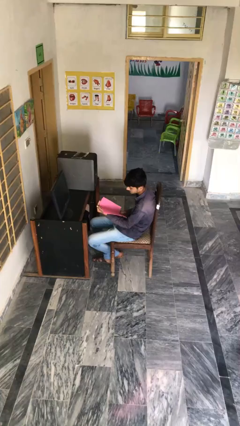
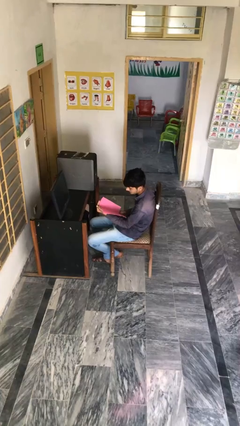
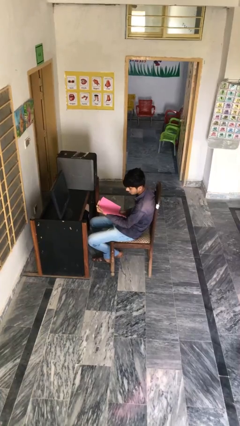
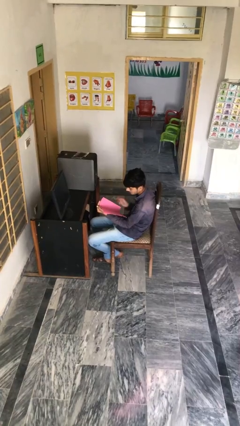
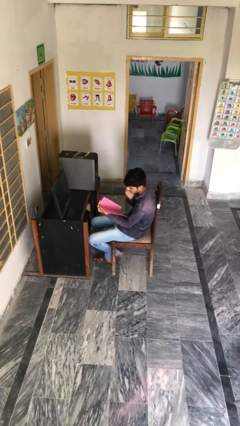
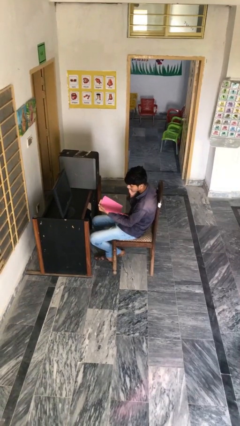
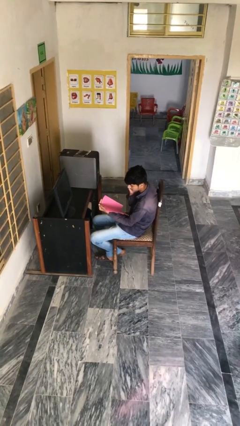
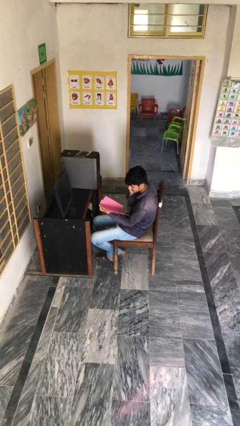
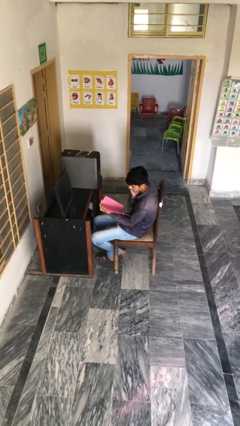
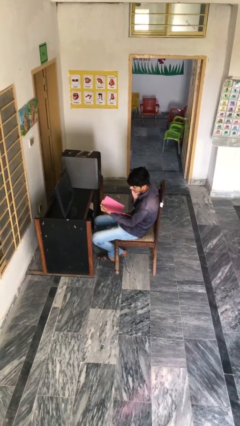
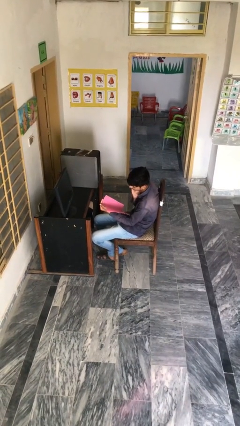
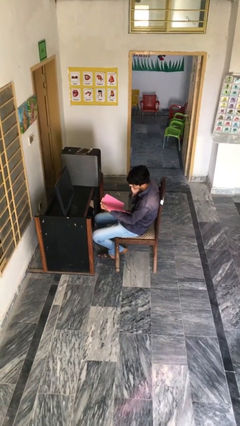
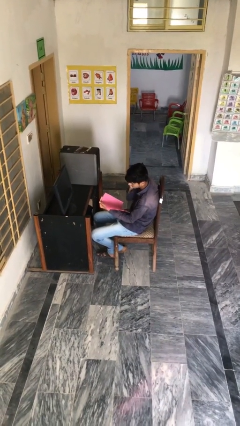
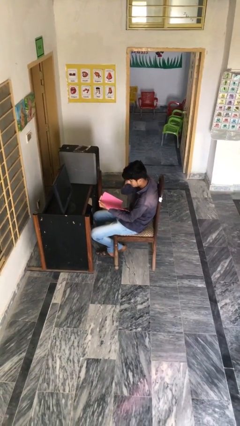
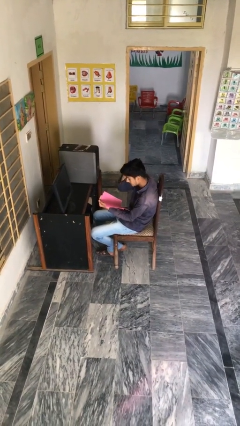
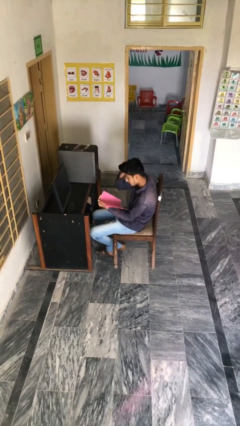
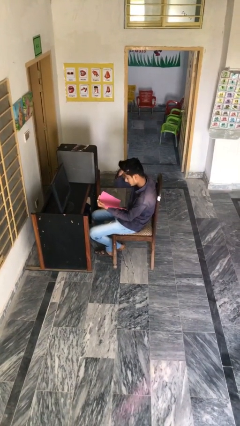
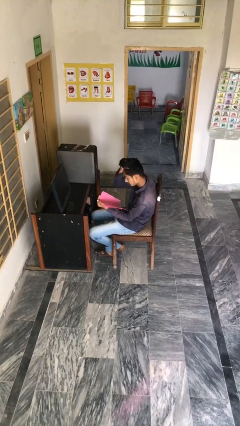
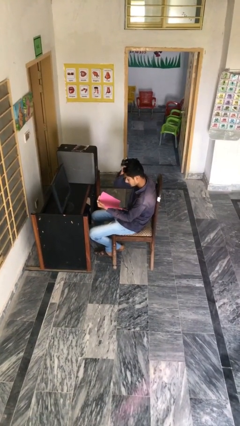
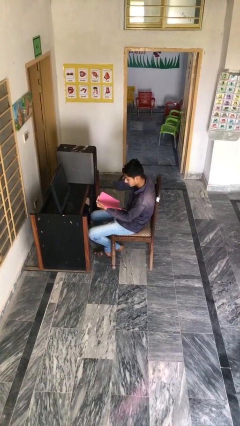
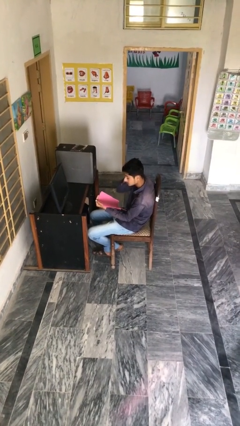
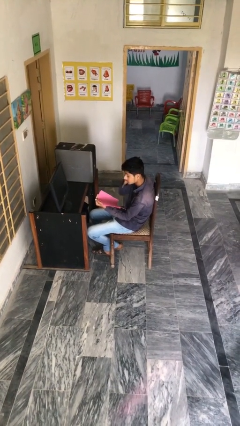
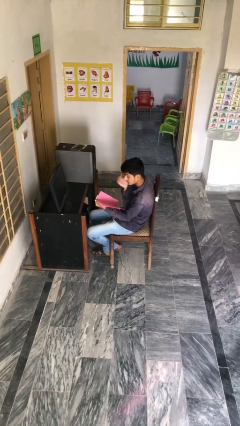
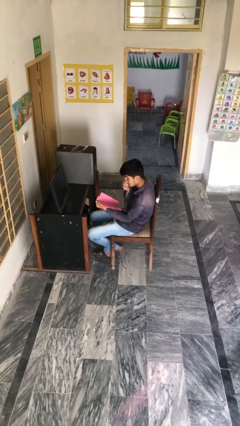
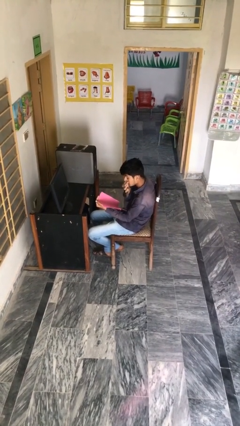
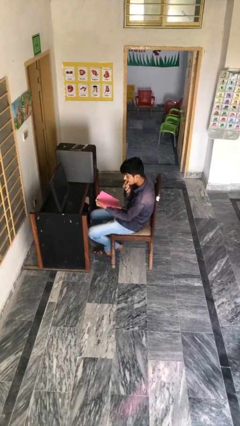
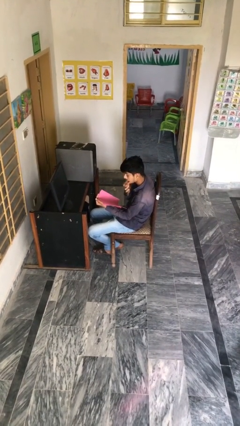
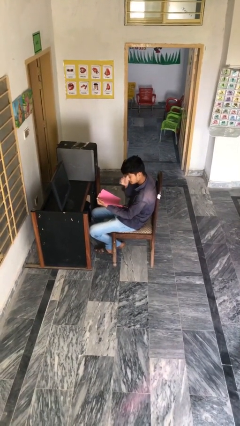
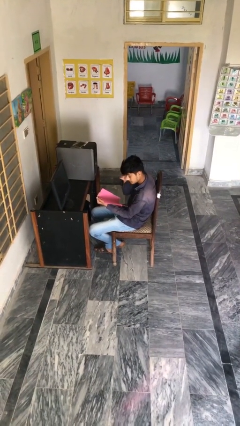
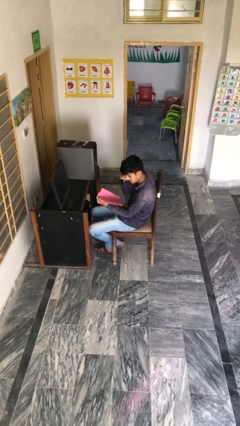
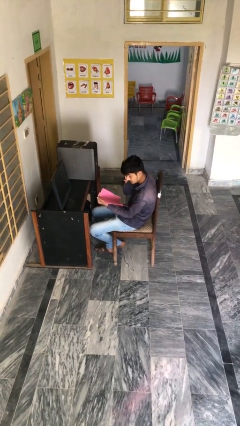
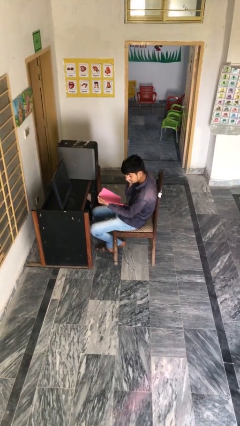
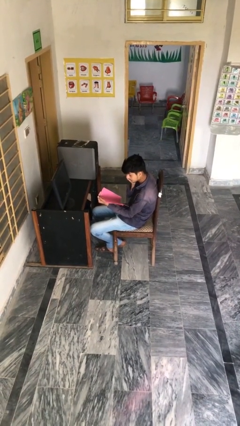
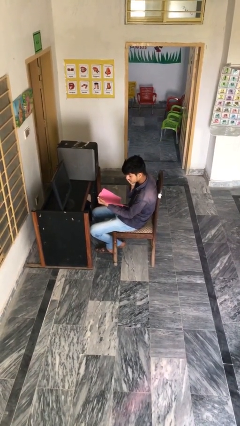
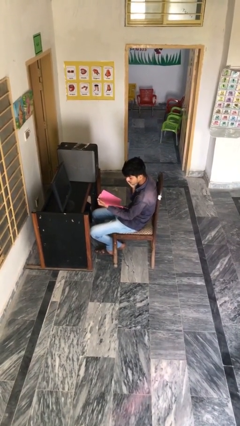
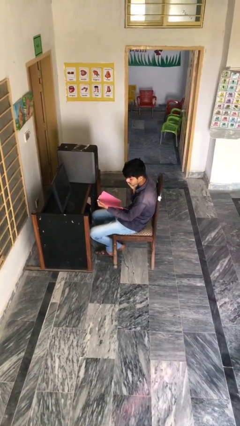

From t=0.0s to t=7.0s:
person reads document

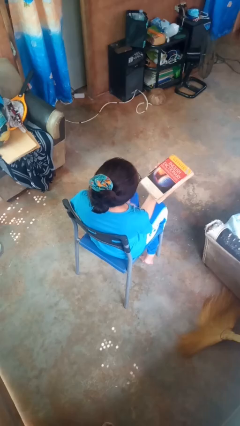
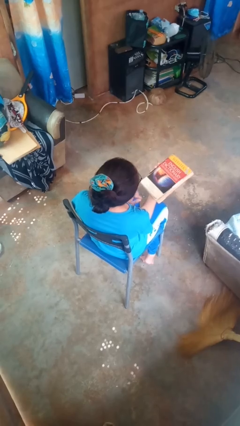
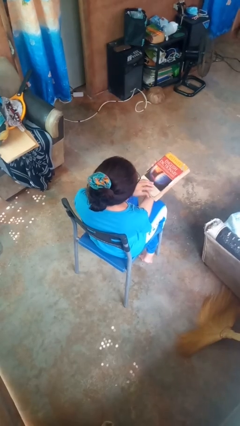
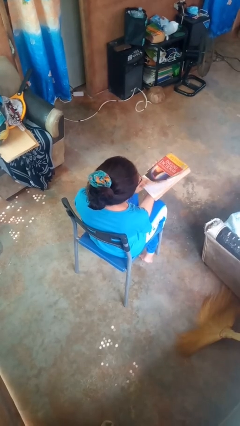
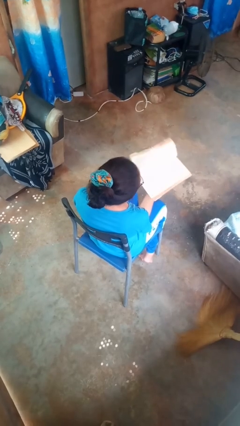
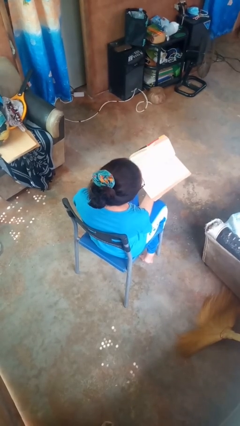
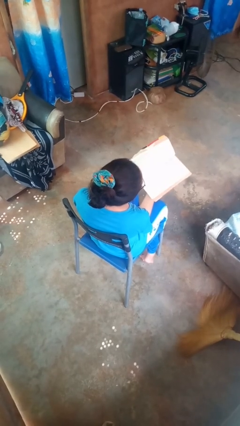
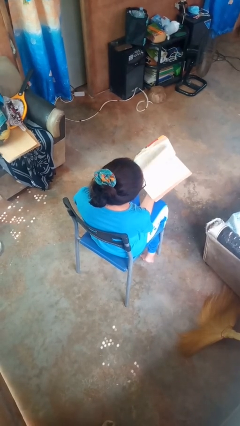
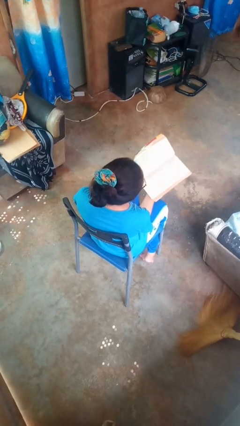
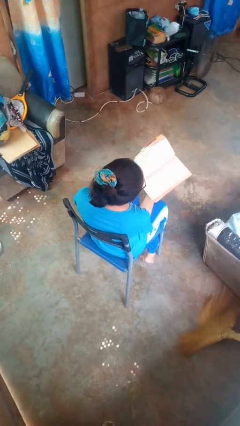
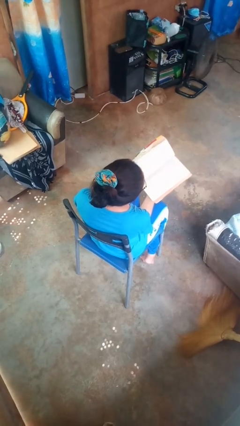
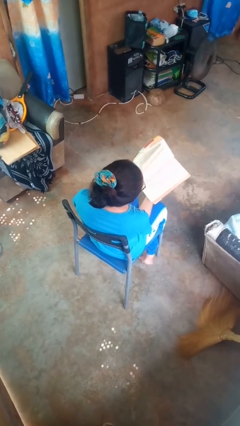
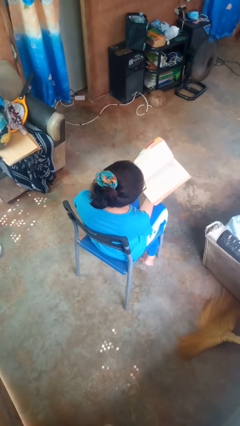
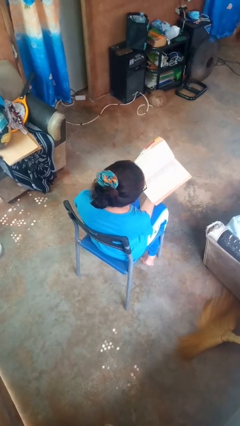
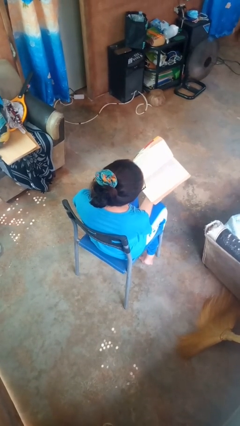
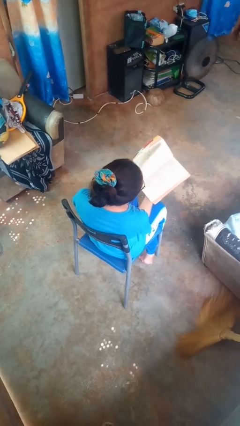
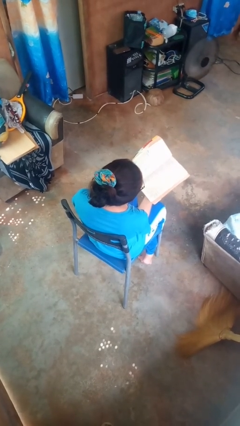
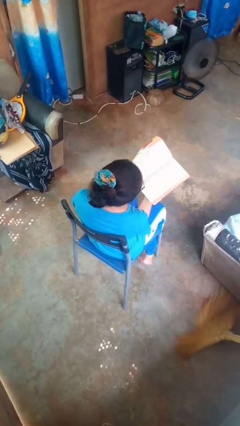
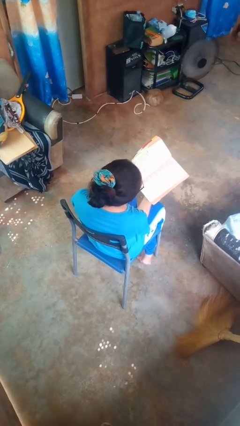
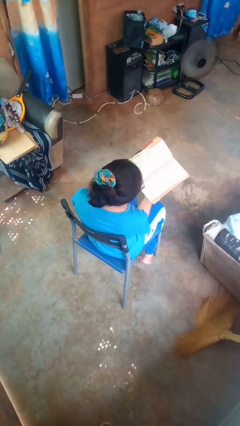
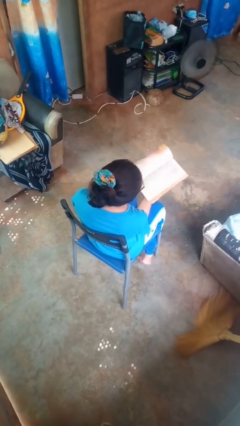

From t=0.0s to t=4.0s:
person reads book

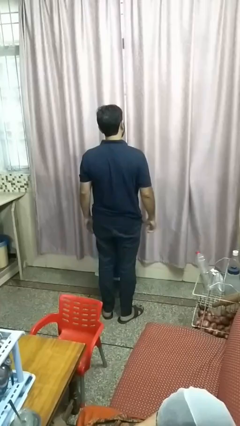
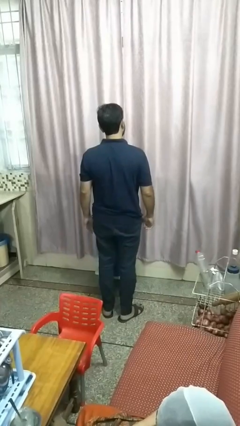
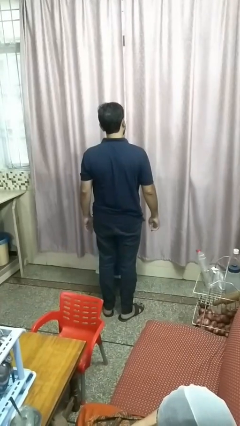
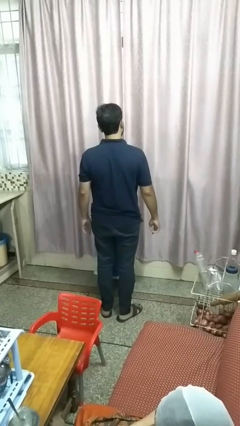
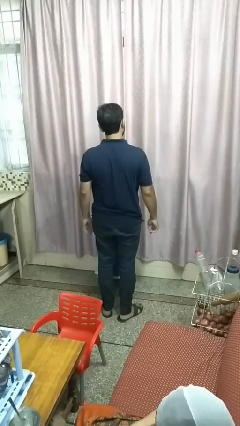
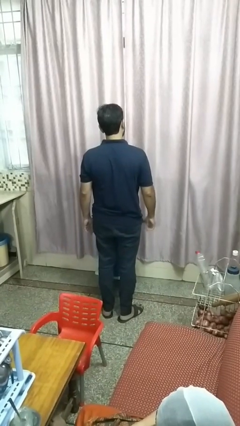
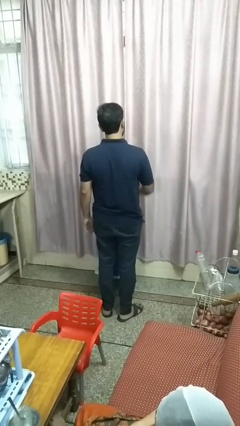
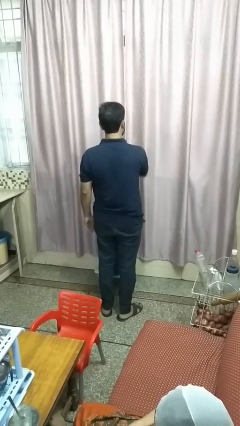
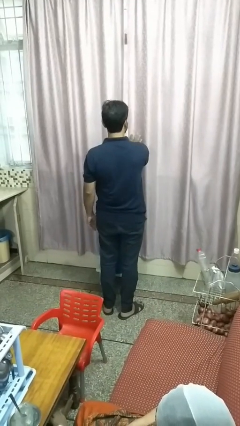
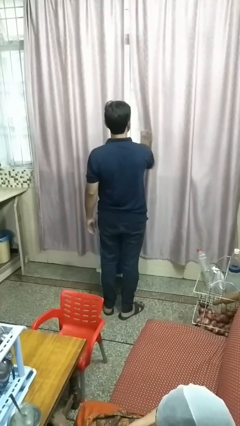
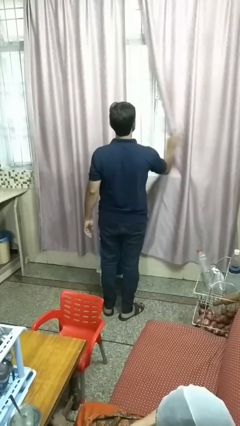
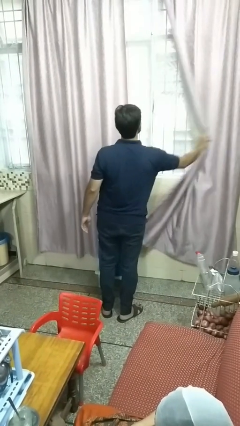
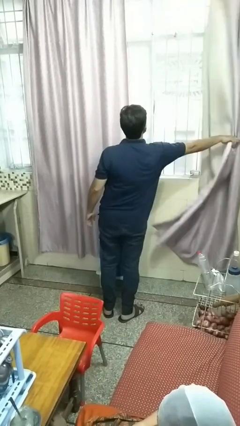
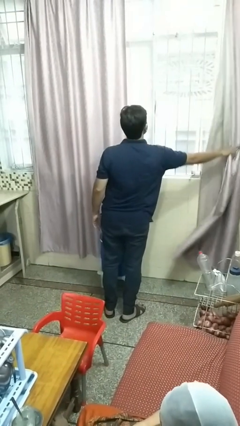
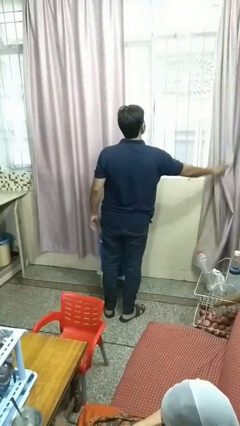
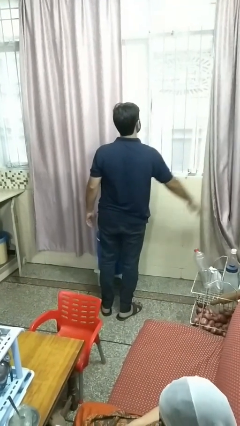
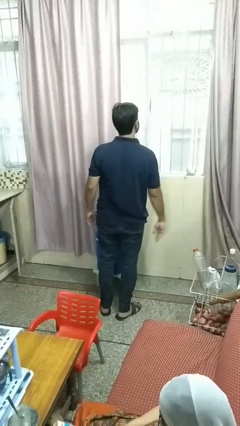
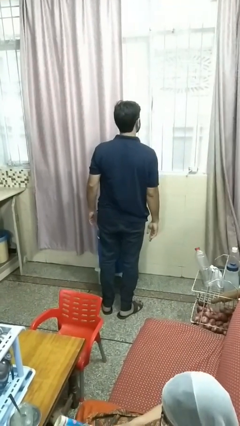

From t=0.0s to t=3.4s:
person opens curtains

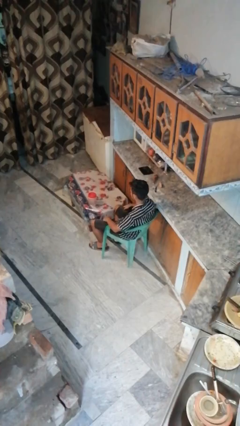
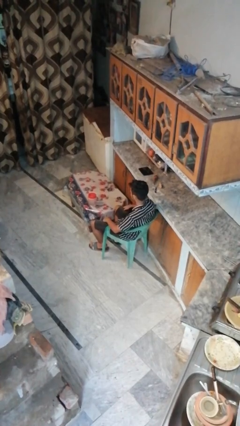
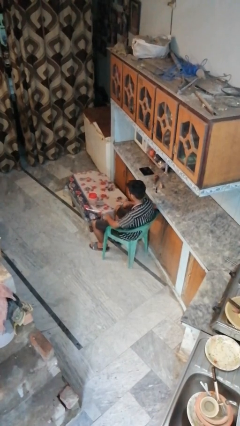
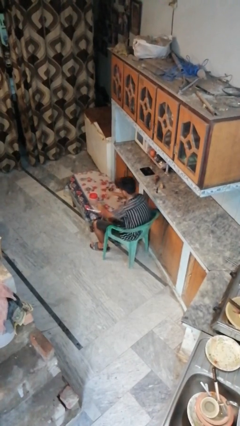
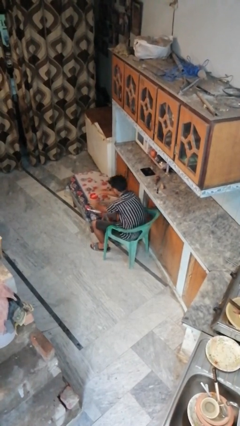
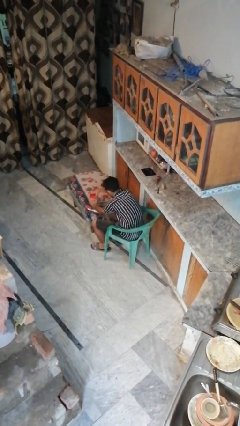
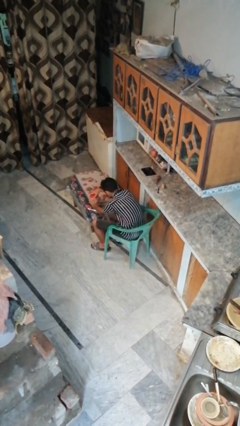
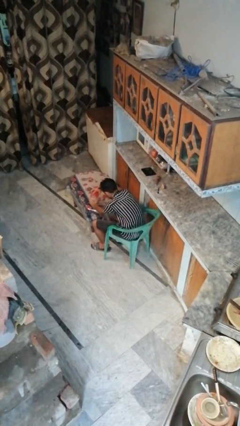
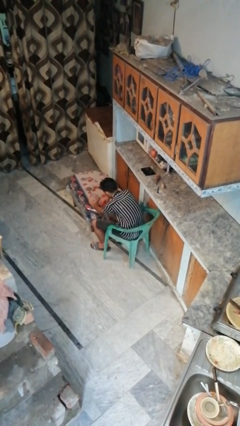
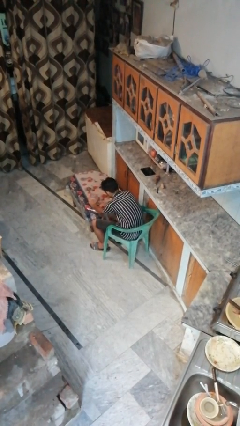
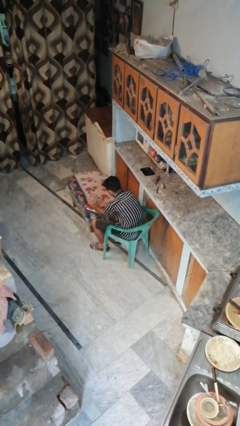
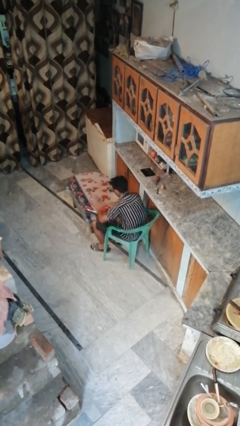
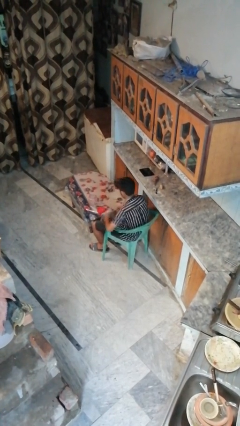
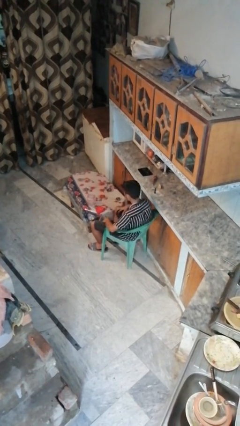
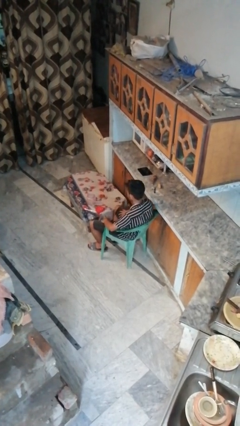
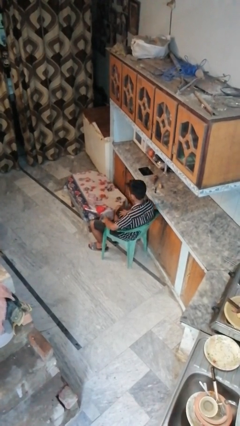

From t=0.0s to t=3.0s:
person opens jar

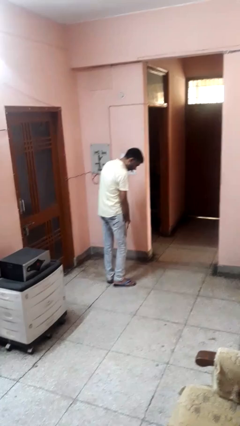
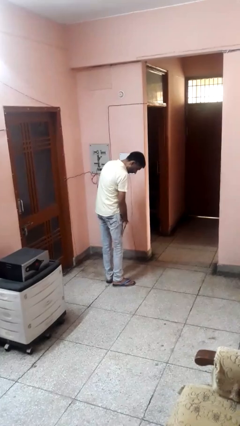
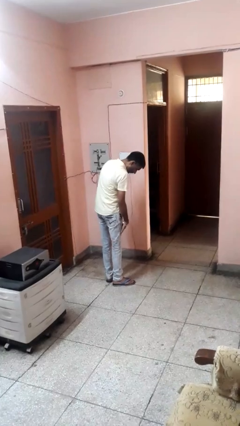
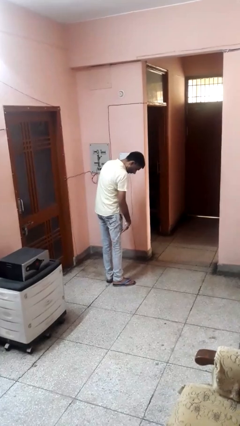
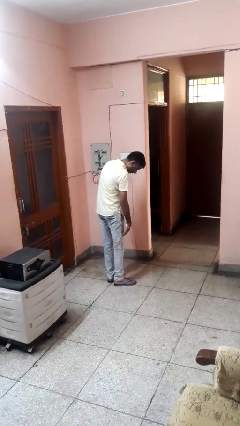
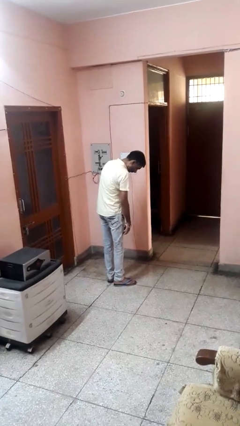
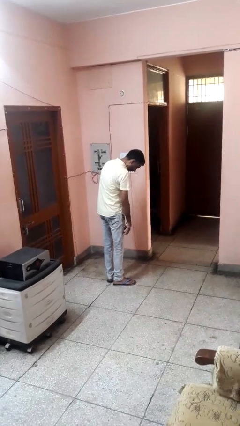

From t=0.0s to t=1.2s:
person swats bug
